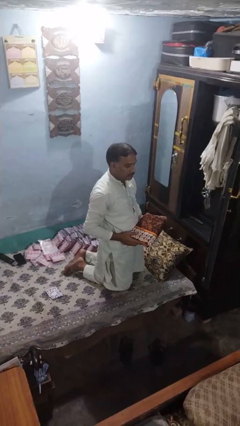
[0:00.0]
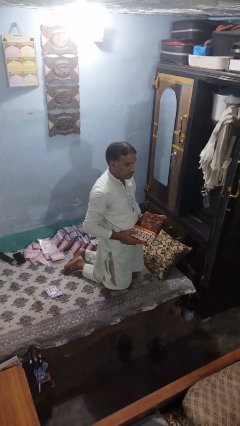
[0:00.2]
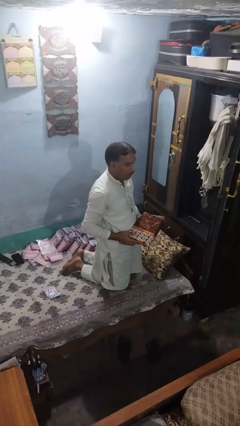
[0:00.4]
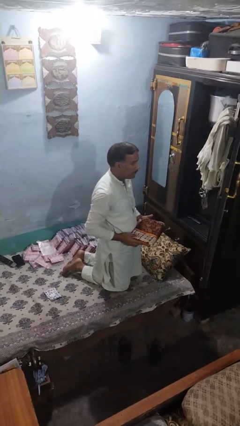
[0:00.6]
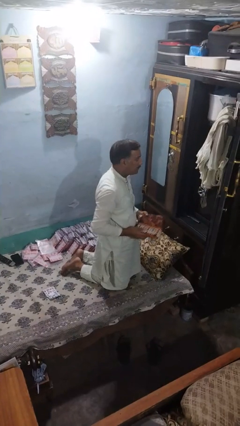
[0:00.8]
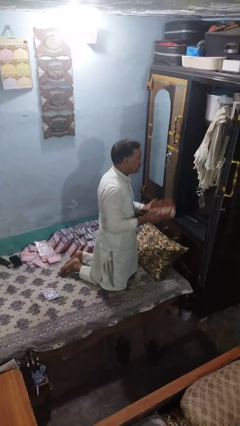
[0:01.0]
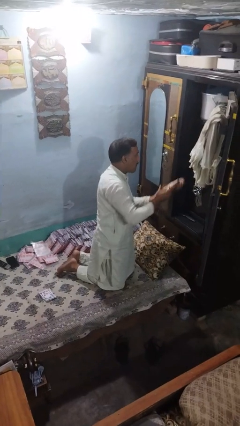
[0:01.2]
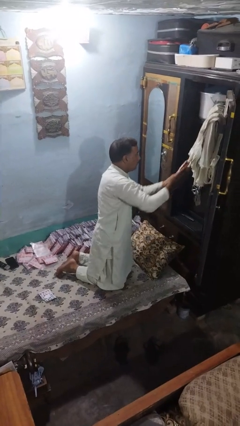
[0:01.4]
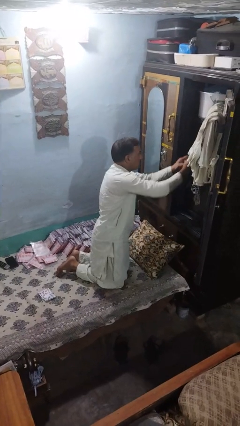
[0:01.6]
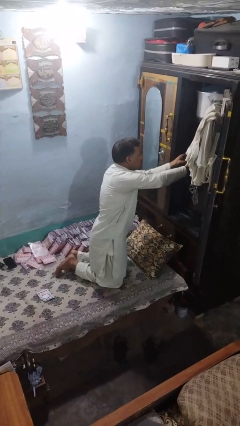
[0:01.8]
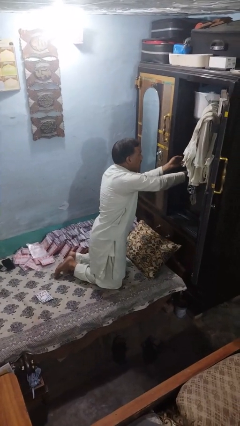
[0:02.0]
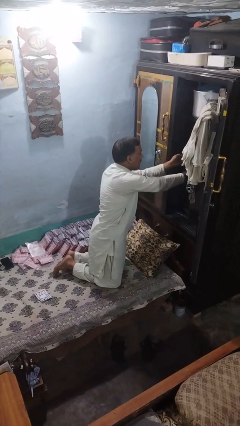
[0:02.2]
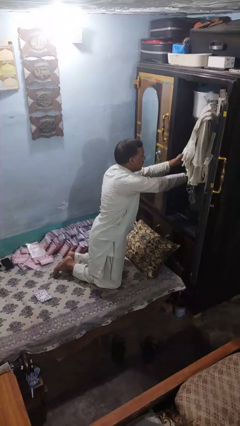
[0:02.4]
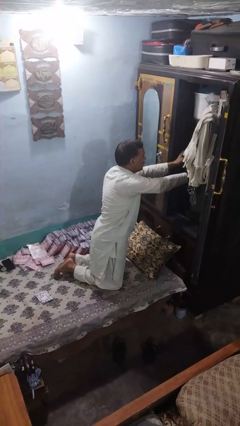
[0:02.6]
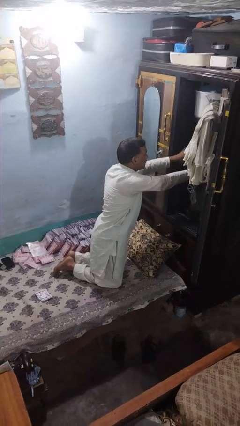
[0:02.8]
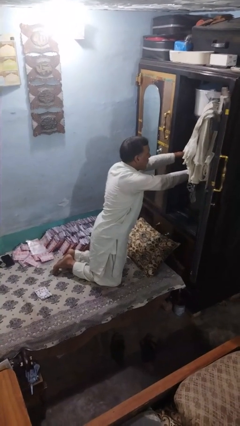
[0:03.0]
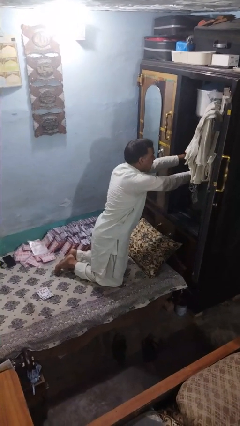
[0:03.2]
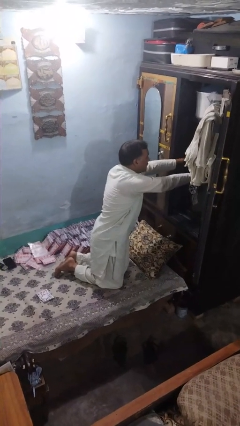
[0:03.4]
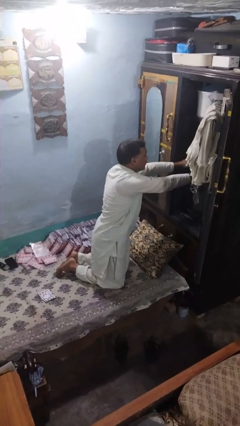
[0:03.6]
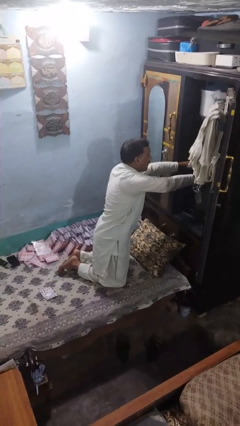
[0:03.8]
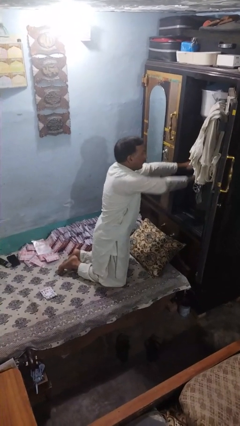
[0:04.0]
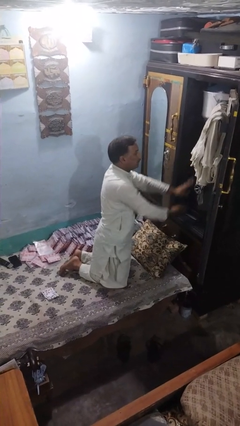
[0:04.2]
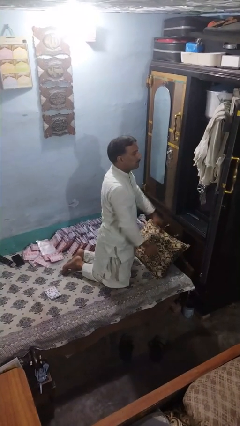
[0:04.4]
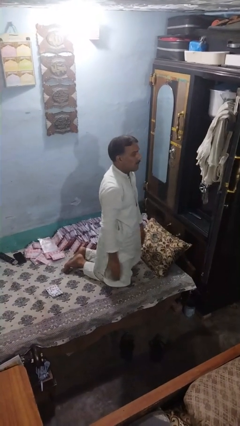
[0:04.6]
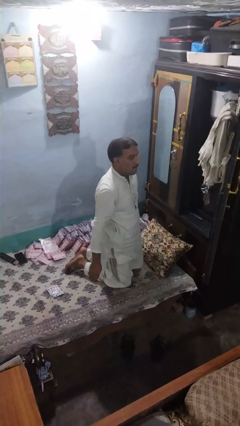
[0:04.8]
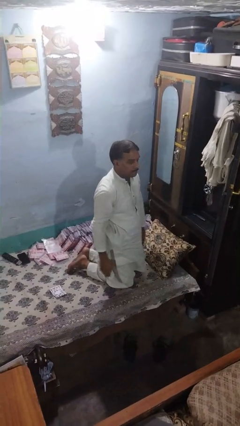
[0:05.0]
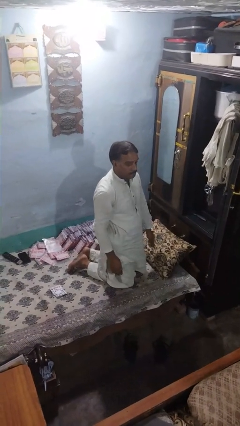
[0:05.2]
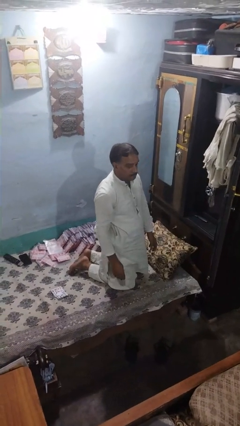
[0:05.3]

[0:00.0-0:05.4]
person puts clothes into dresser

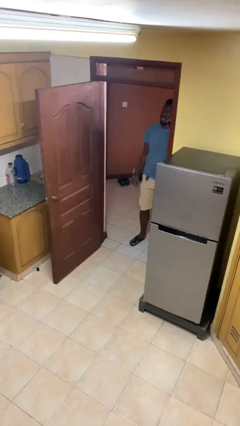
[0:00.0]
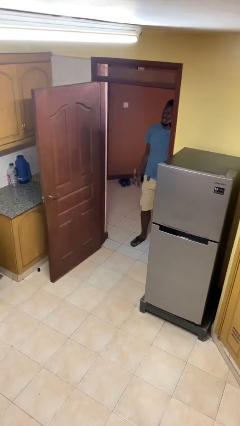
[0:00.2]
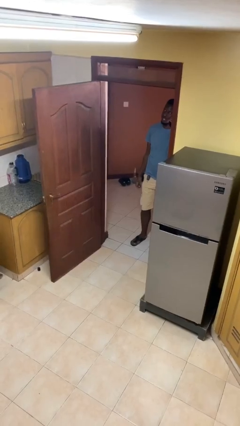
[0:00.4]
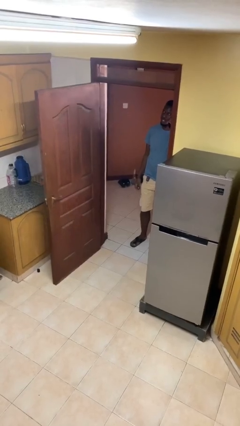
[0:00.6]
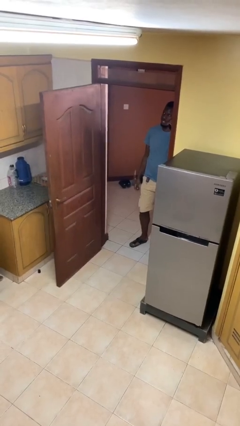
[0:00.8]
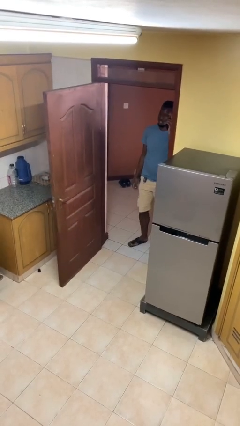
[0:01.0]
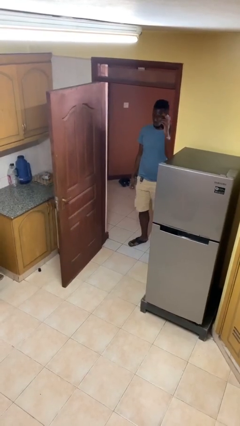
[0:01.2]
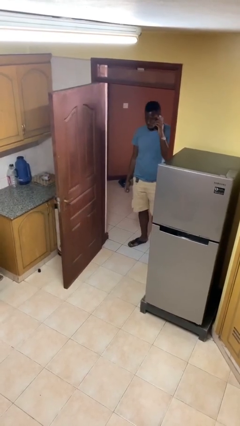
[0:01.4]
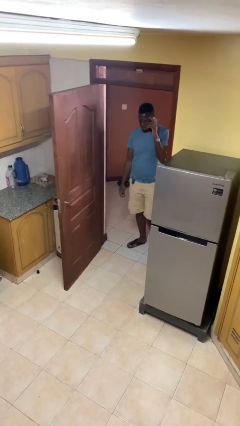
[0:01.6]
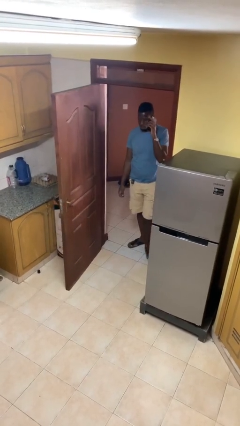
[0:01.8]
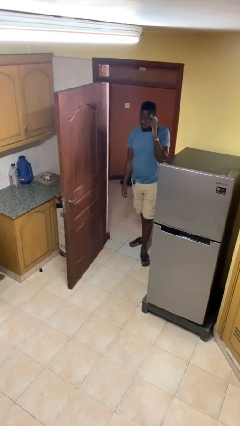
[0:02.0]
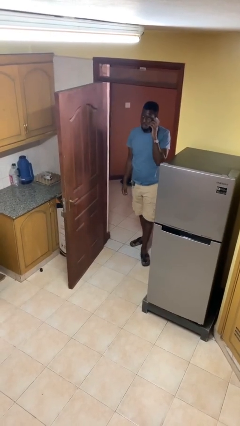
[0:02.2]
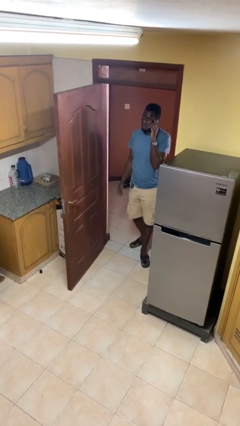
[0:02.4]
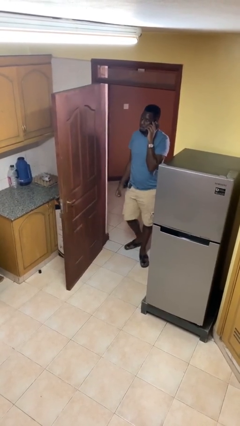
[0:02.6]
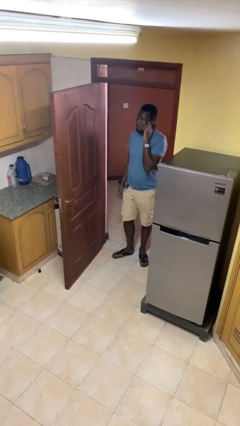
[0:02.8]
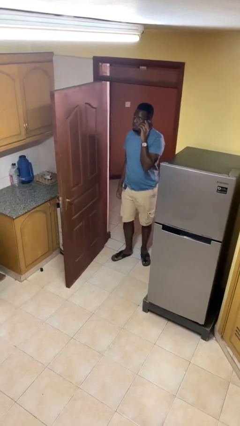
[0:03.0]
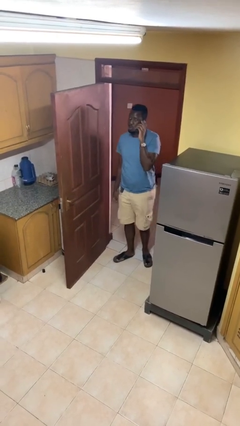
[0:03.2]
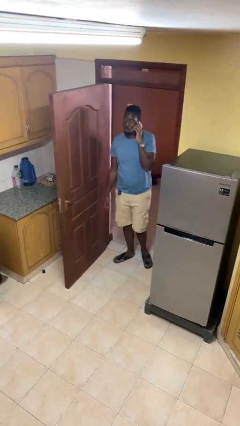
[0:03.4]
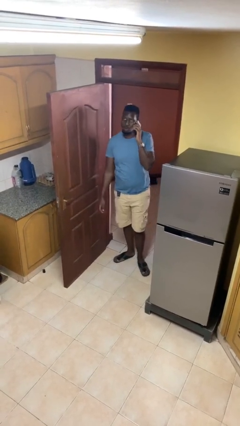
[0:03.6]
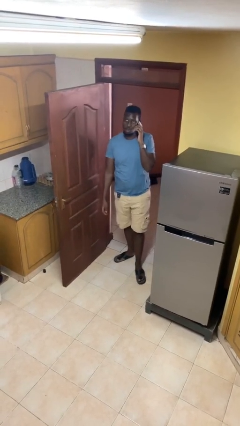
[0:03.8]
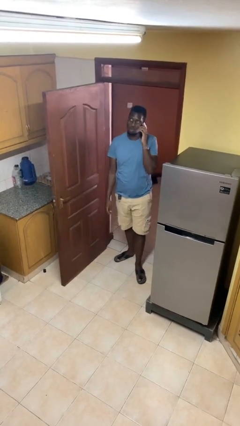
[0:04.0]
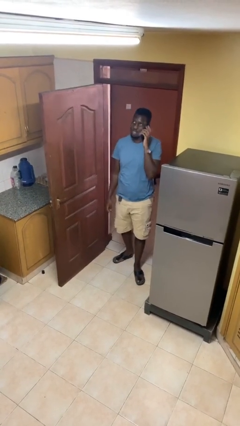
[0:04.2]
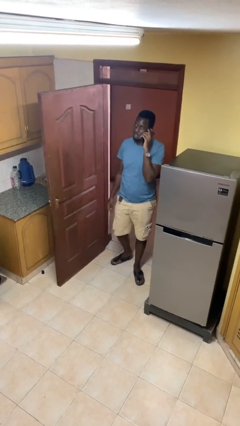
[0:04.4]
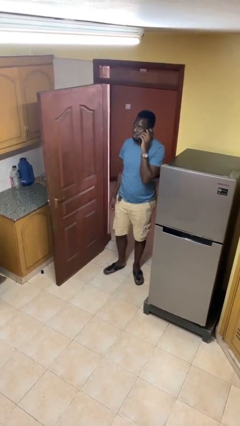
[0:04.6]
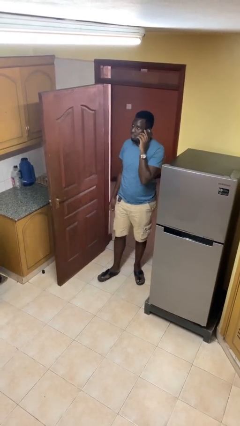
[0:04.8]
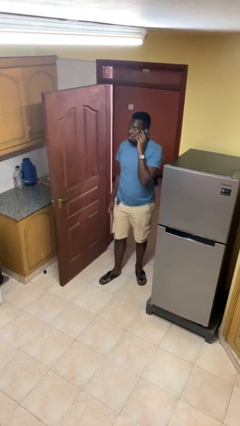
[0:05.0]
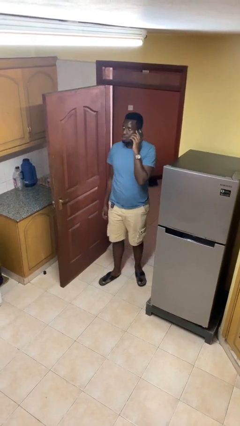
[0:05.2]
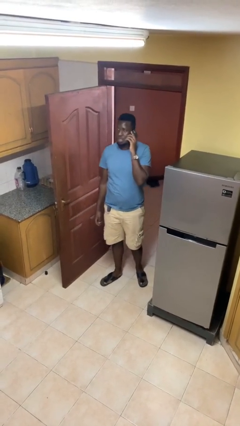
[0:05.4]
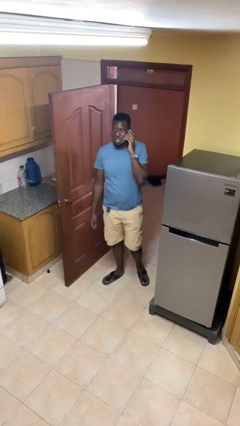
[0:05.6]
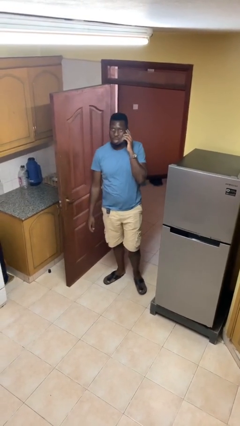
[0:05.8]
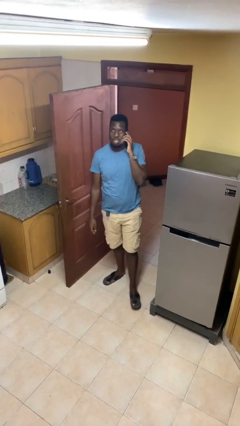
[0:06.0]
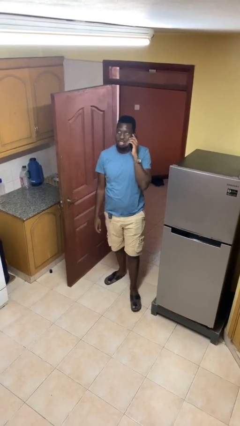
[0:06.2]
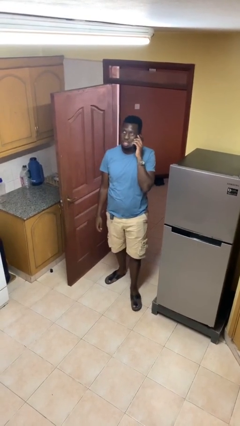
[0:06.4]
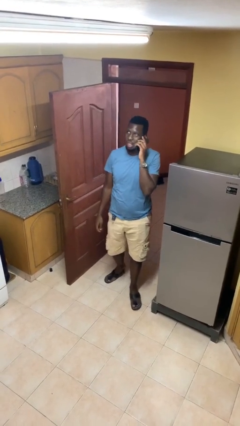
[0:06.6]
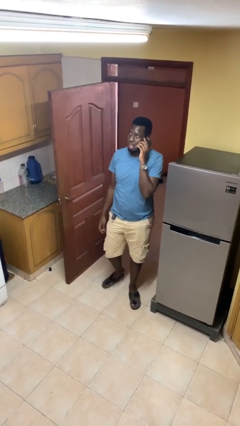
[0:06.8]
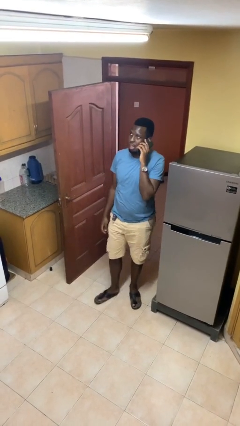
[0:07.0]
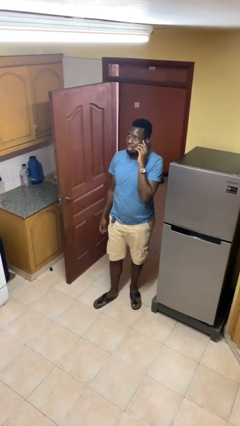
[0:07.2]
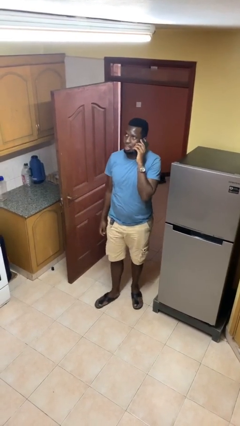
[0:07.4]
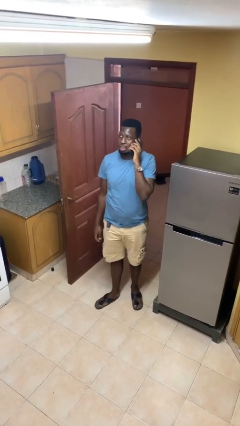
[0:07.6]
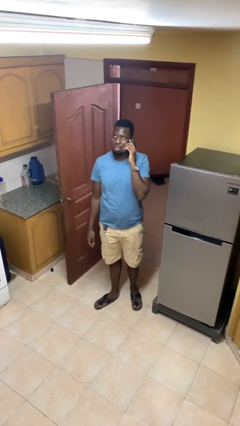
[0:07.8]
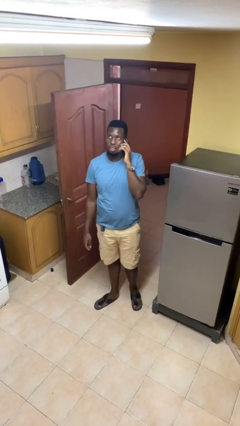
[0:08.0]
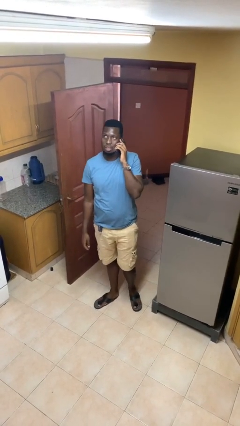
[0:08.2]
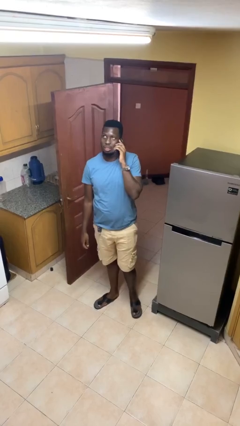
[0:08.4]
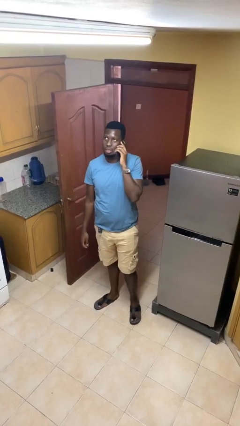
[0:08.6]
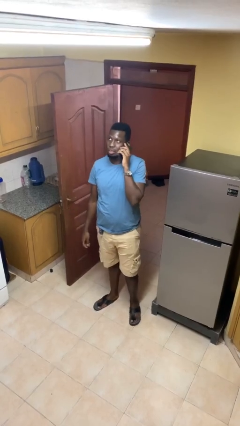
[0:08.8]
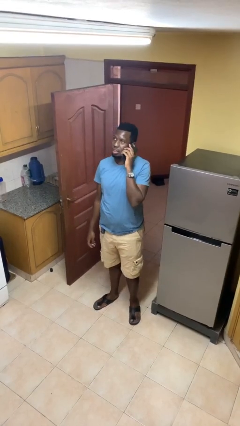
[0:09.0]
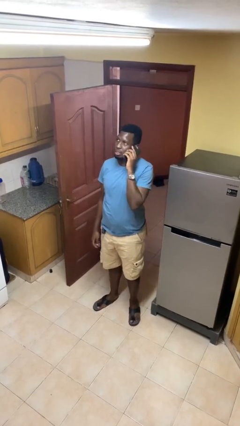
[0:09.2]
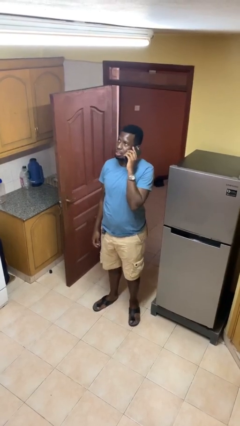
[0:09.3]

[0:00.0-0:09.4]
person enters scene through structure

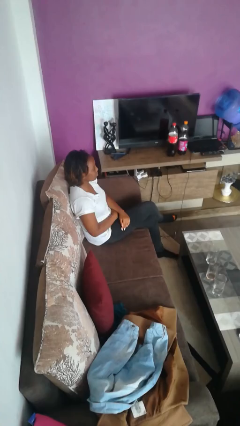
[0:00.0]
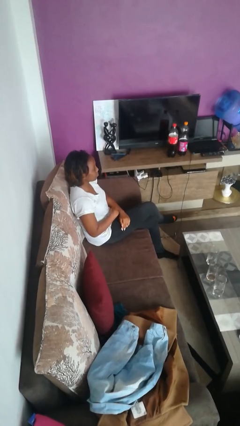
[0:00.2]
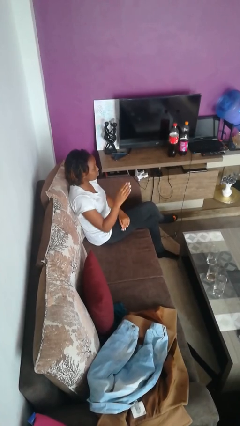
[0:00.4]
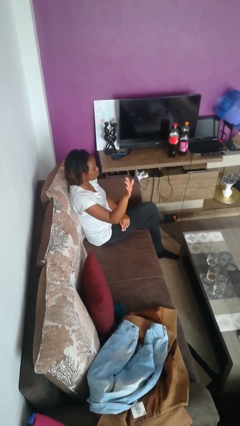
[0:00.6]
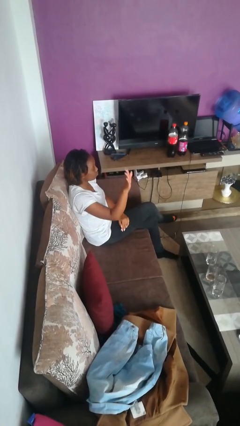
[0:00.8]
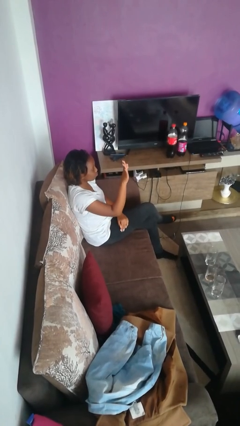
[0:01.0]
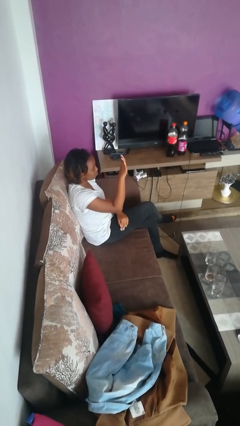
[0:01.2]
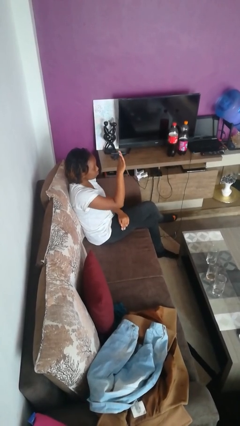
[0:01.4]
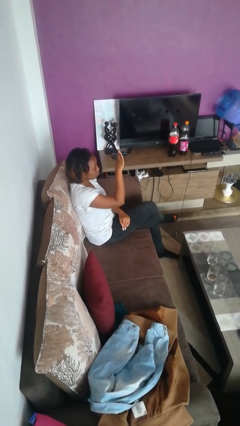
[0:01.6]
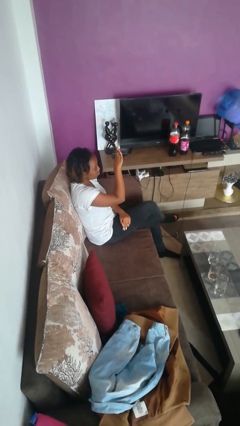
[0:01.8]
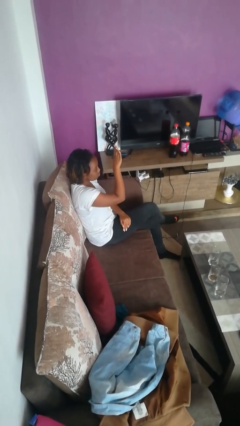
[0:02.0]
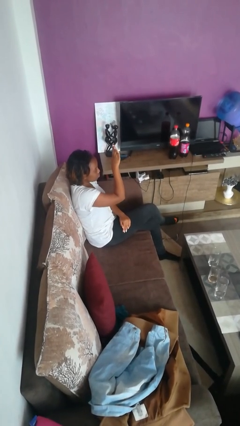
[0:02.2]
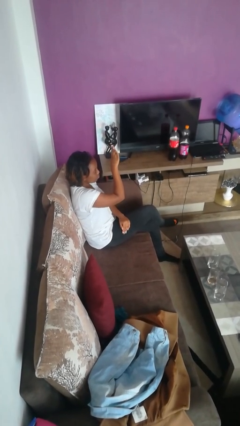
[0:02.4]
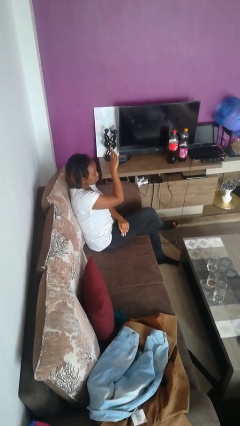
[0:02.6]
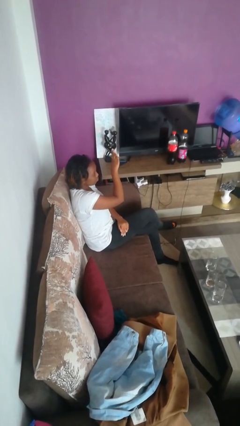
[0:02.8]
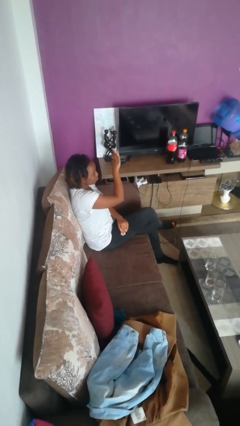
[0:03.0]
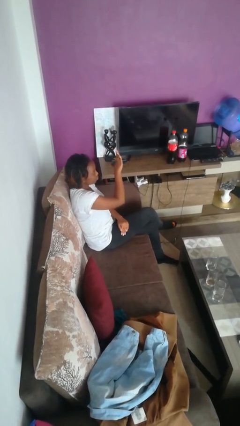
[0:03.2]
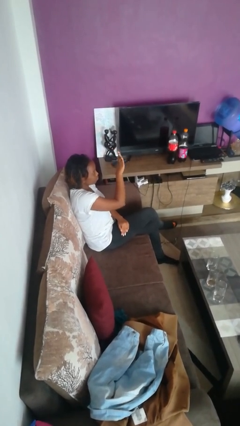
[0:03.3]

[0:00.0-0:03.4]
person gestures swipe left
